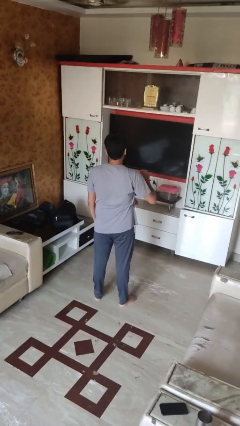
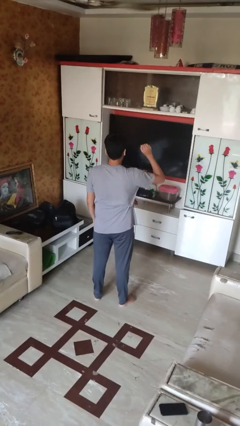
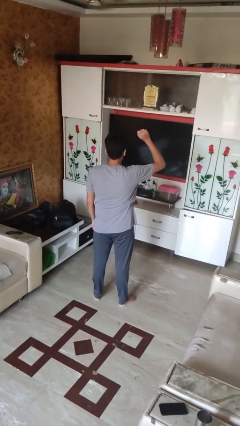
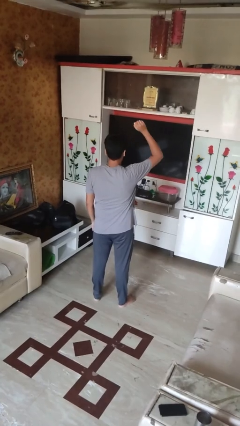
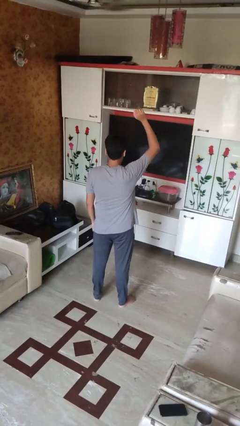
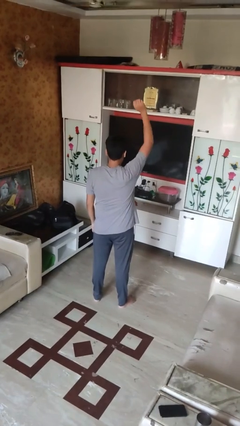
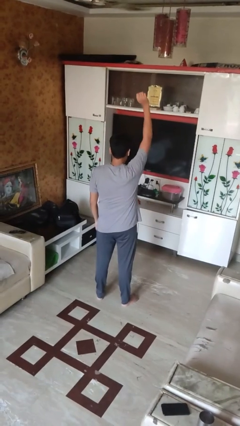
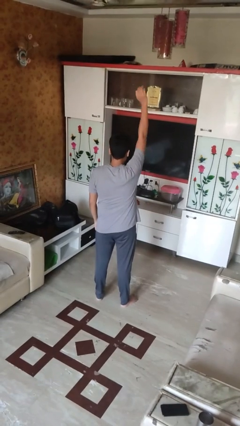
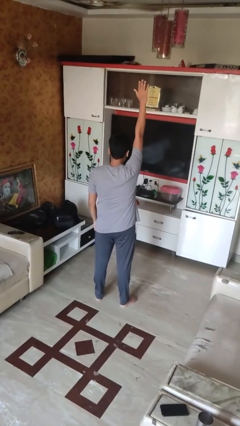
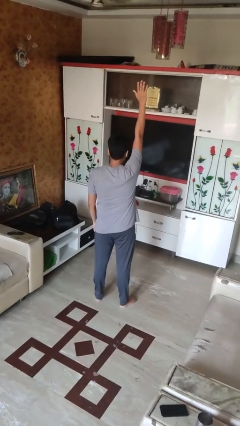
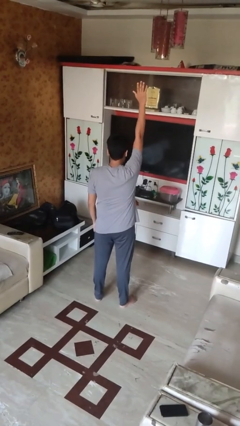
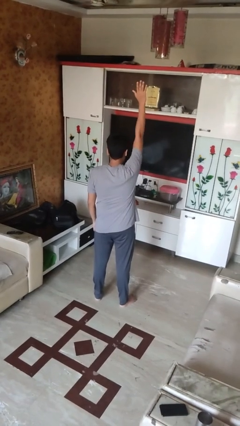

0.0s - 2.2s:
person gestures raise hand

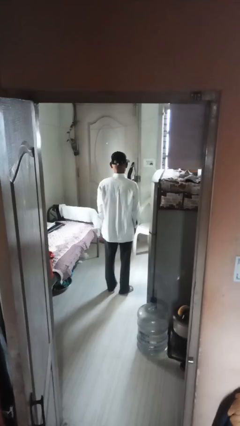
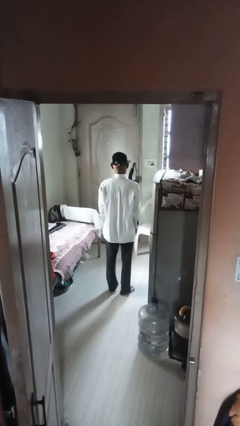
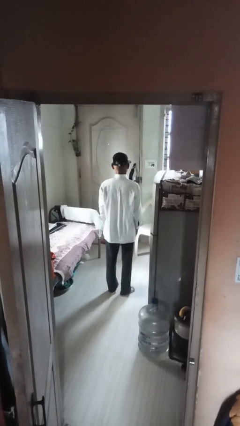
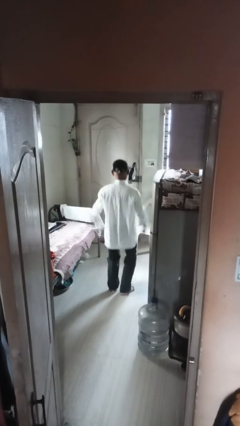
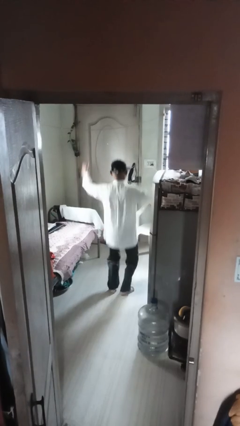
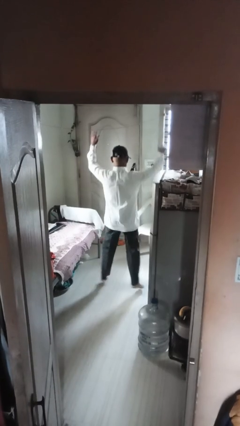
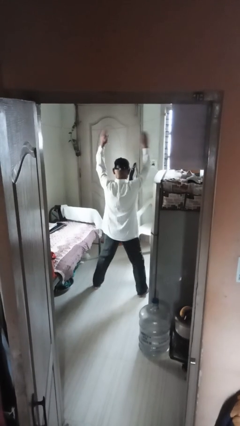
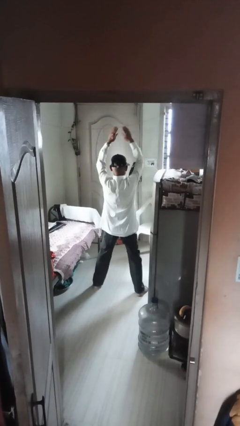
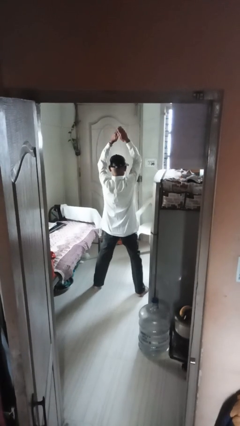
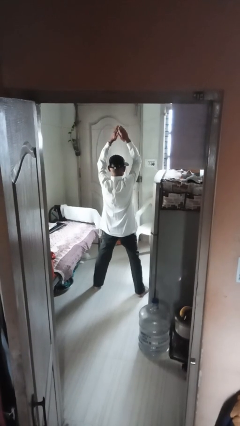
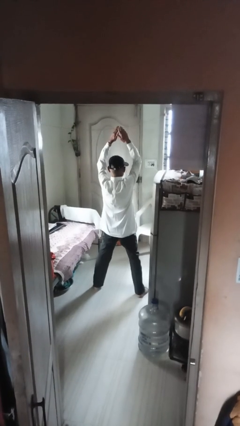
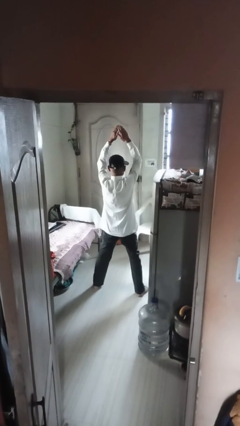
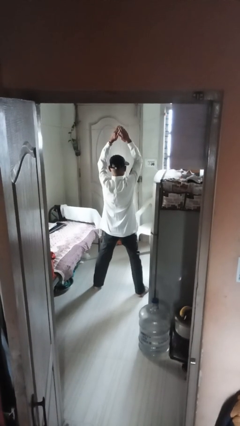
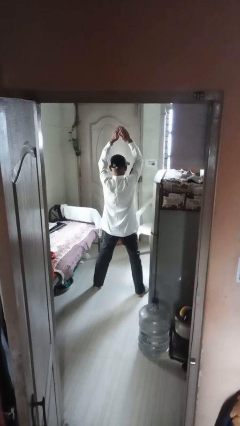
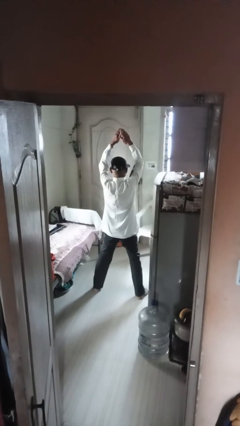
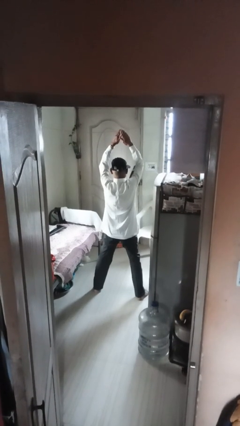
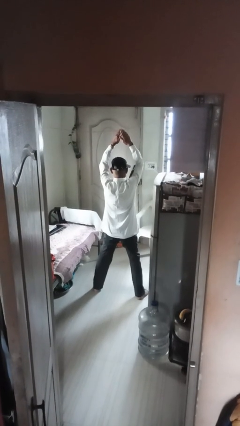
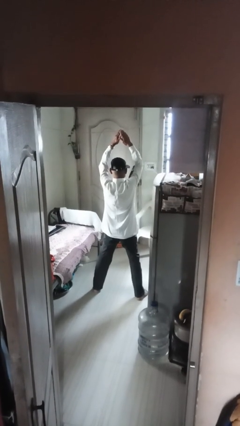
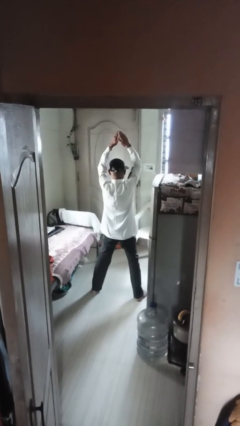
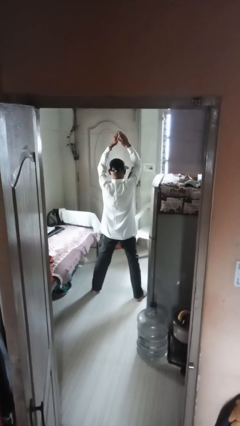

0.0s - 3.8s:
person exercises with jumping jacks

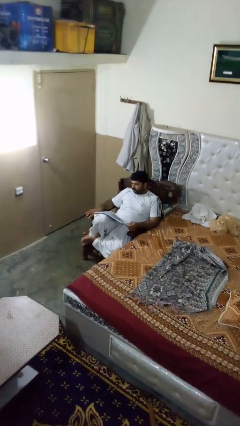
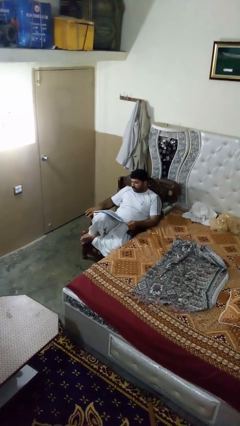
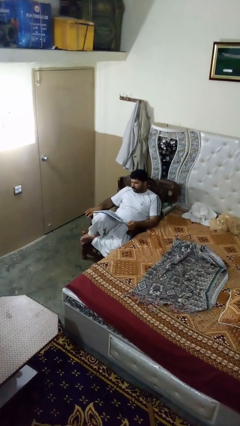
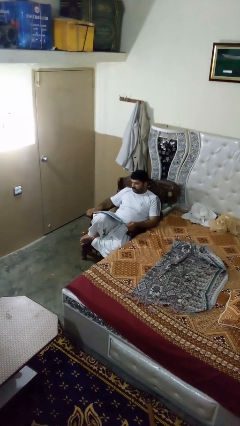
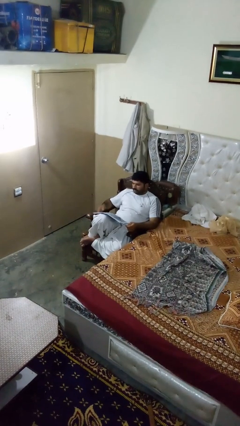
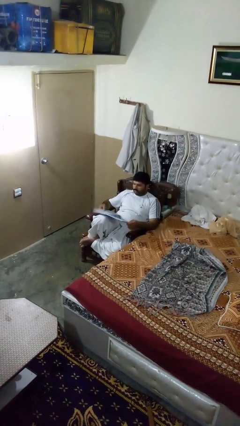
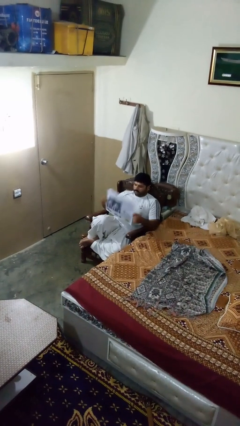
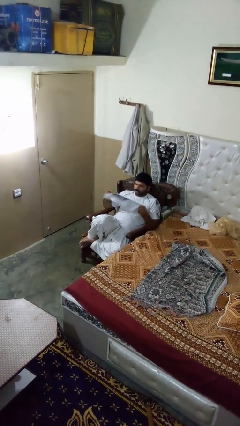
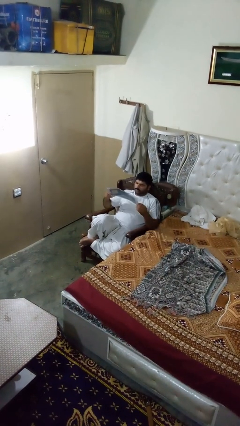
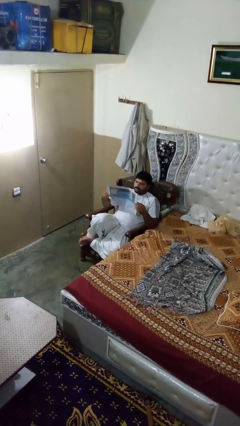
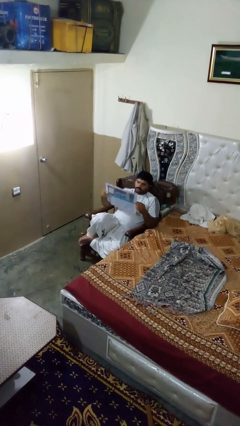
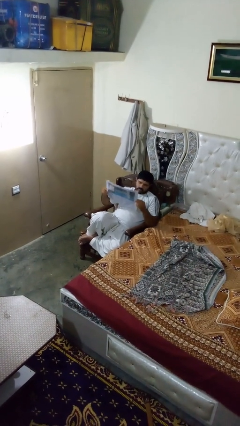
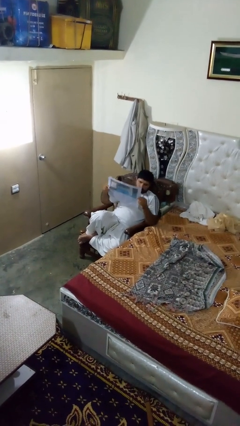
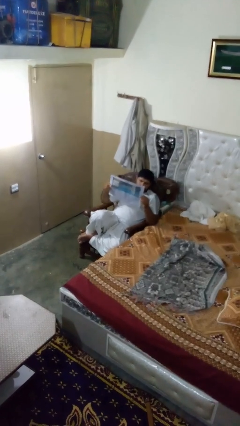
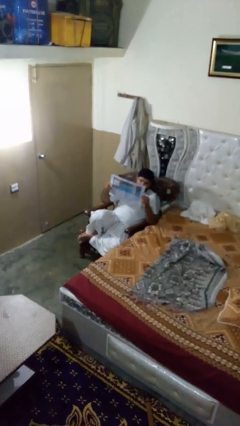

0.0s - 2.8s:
person reads newspaper

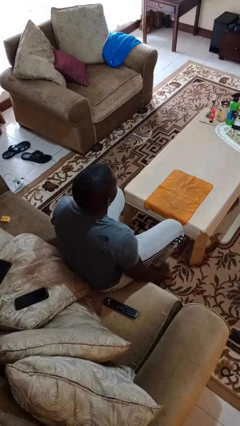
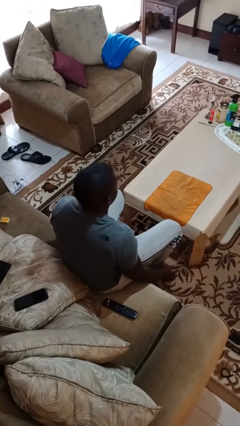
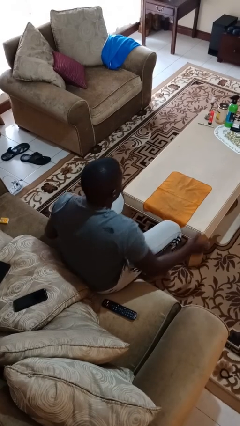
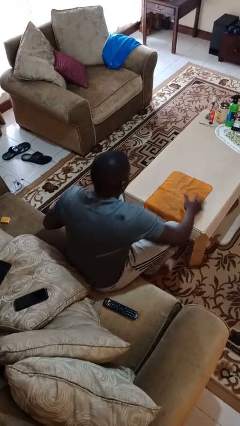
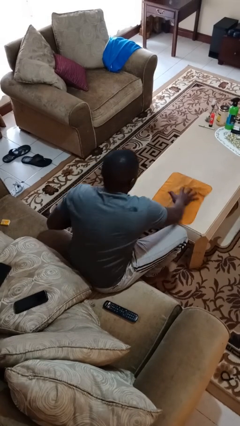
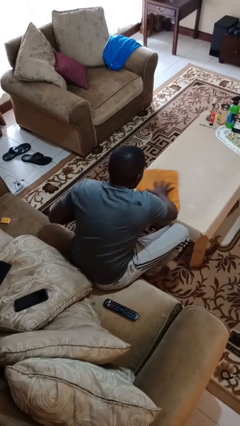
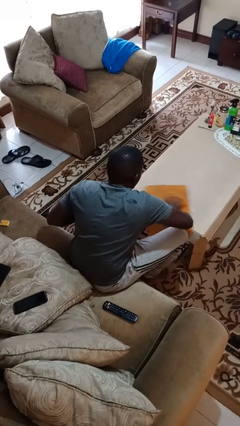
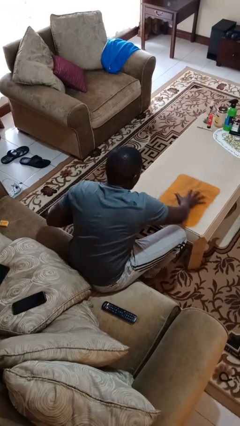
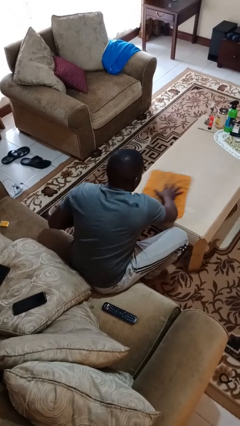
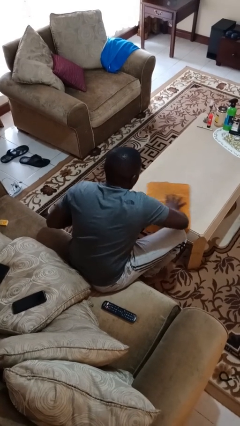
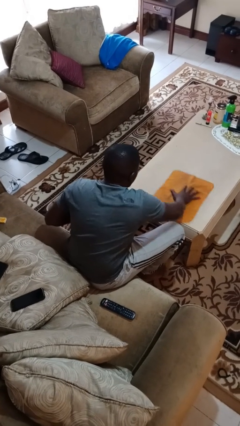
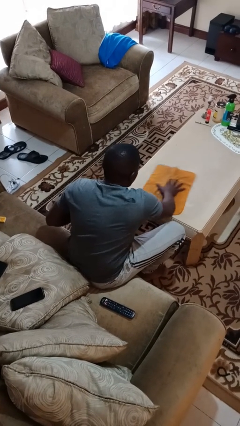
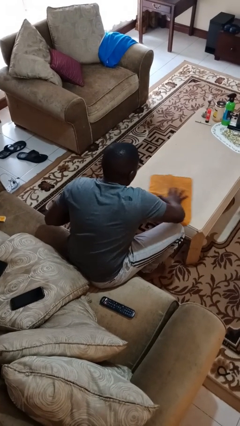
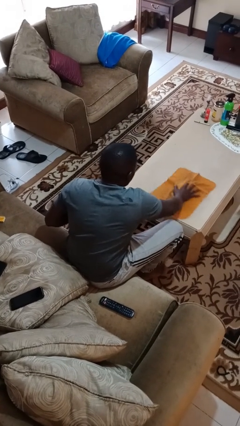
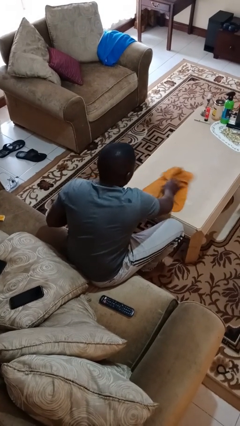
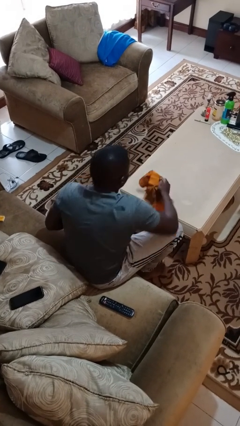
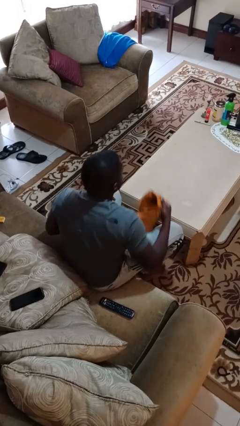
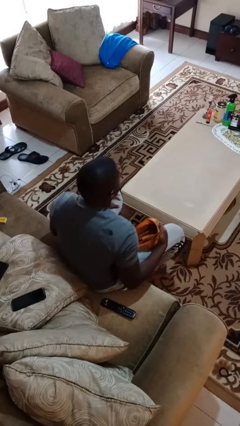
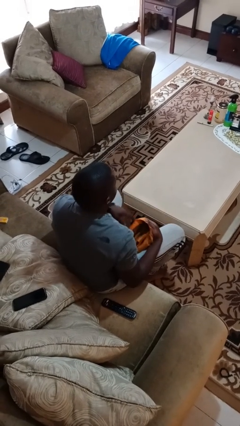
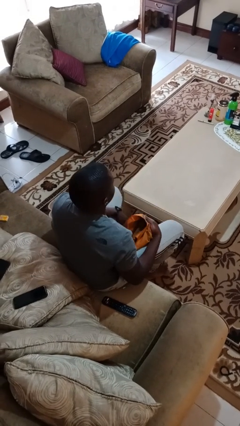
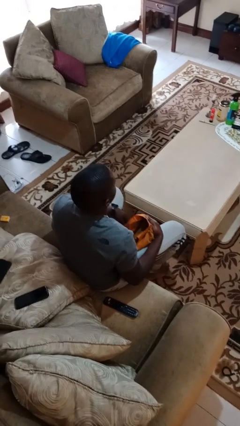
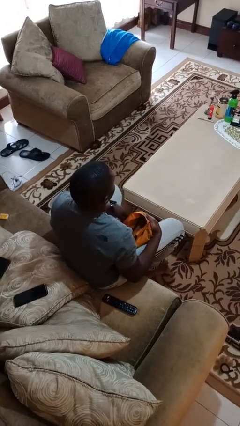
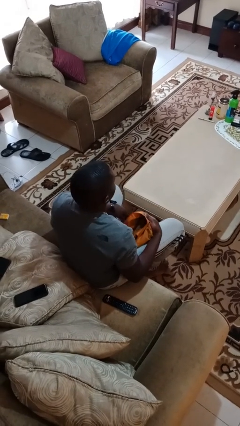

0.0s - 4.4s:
person cleans table with rag

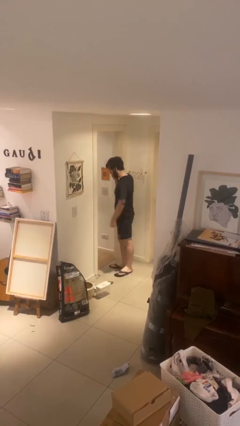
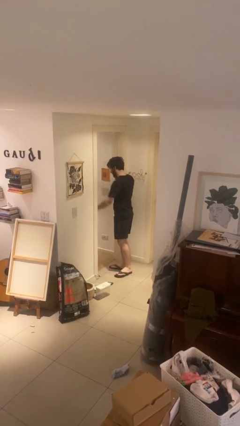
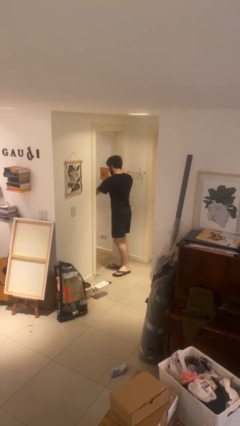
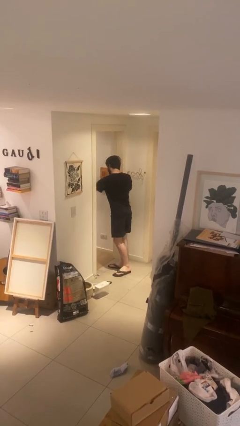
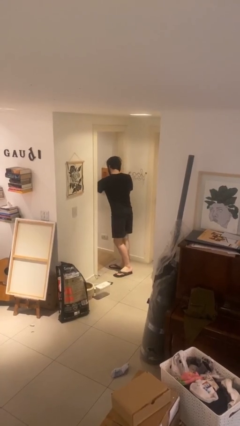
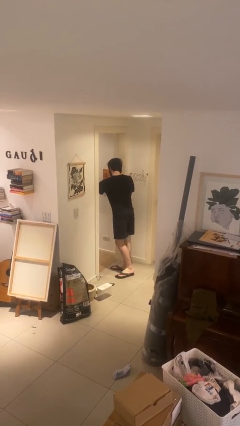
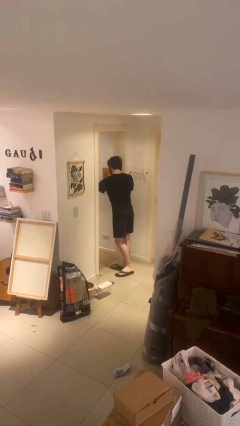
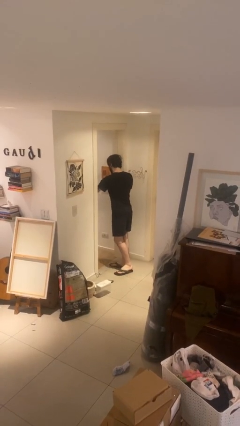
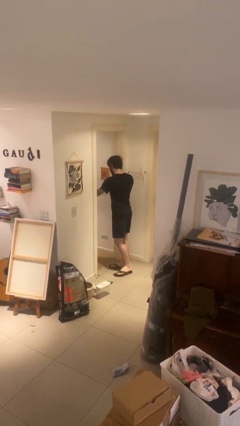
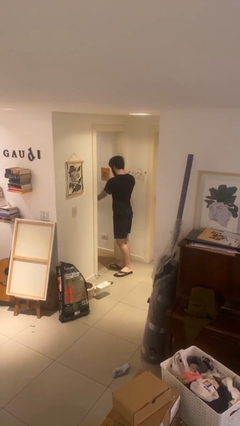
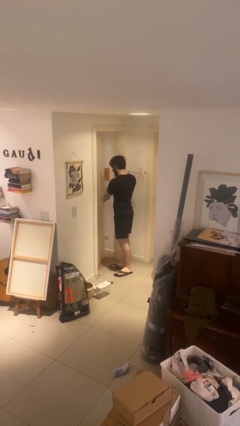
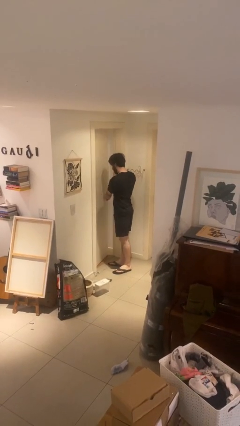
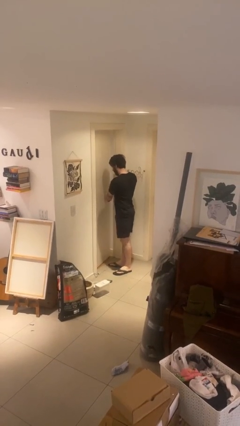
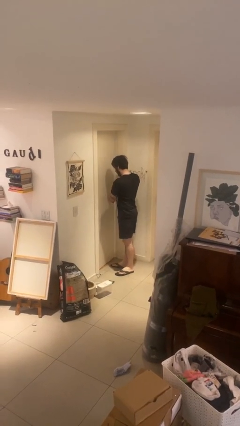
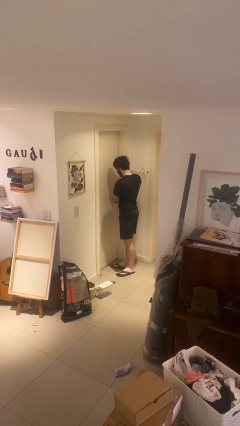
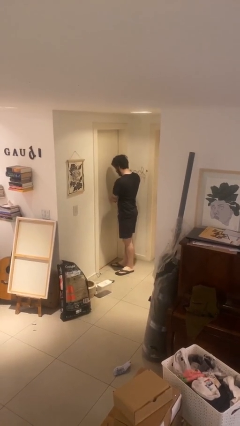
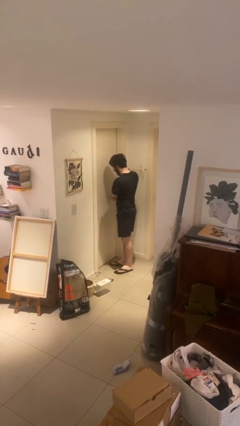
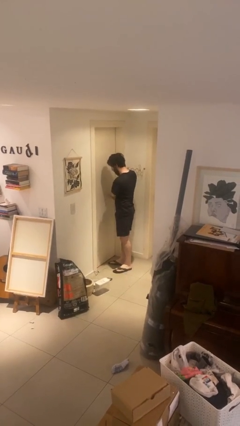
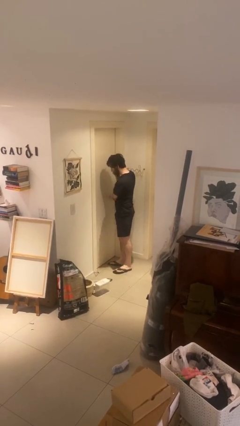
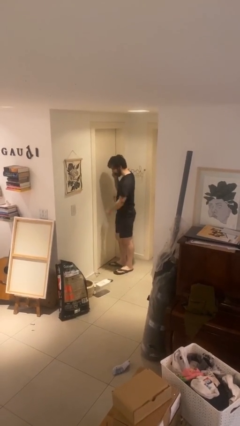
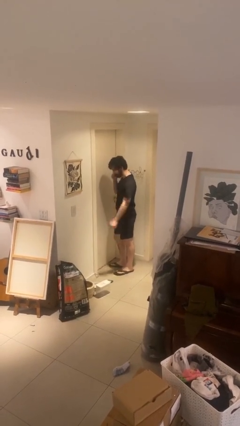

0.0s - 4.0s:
person closes facility door
